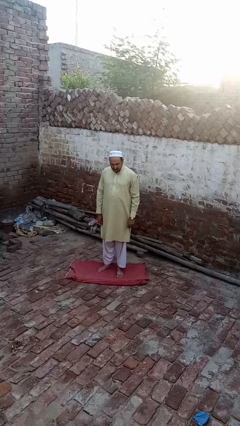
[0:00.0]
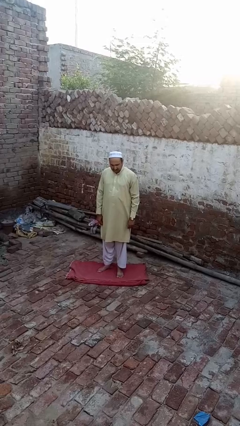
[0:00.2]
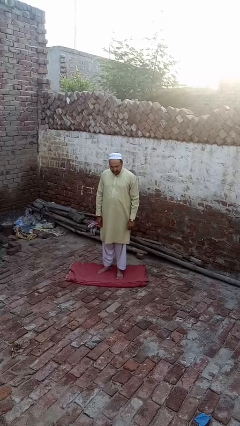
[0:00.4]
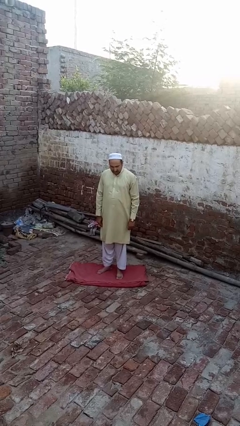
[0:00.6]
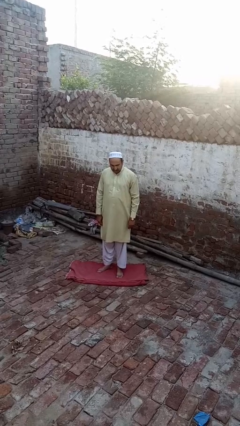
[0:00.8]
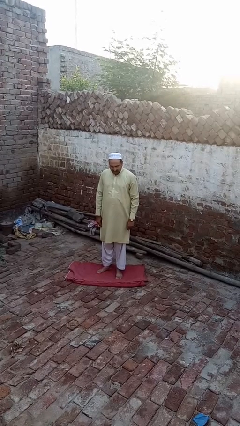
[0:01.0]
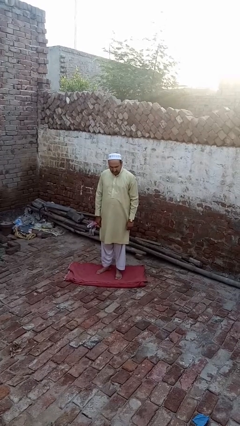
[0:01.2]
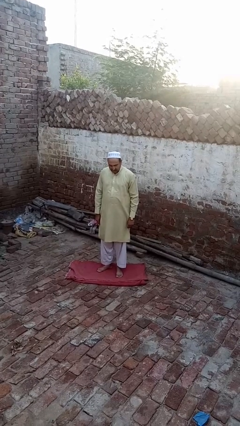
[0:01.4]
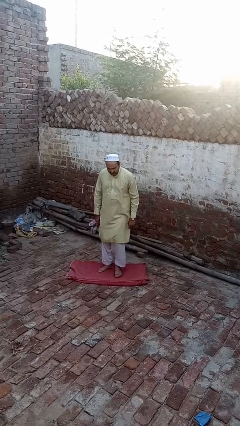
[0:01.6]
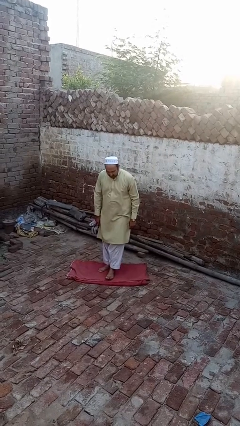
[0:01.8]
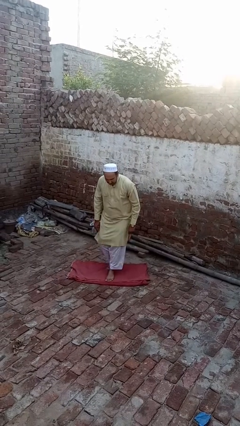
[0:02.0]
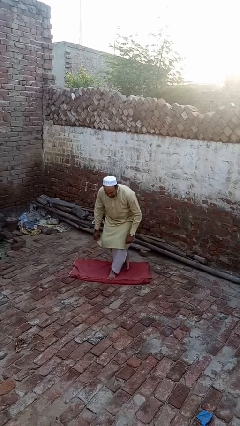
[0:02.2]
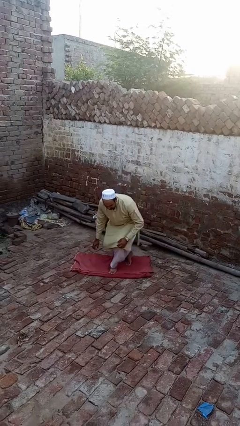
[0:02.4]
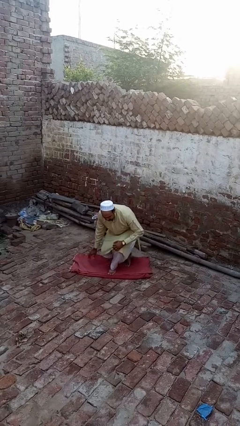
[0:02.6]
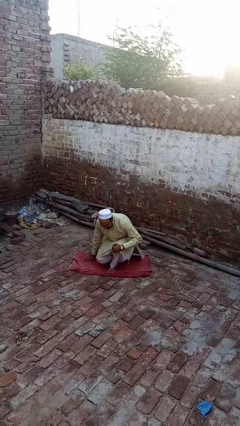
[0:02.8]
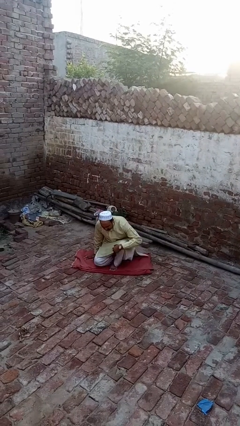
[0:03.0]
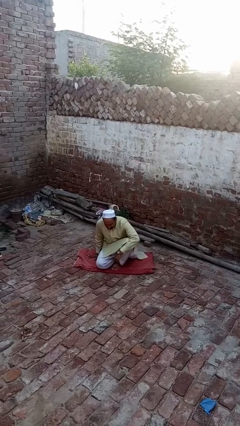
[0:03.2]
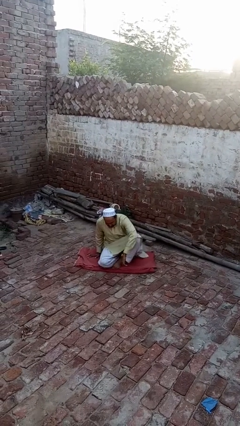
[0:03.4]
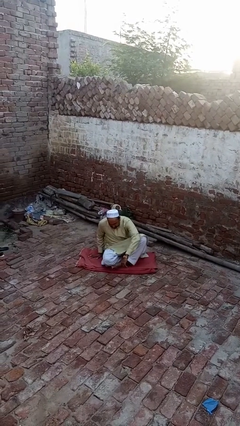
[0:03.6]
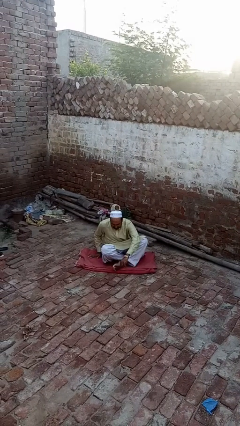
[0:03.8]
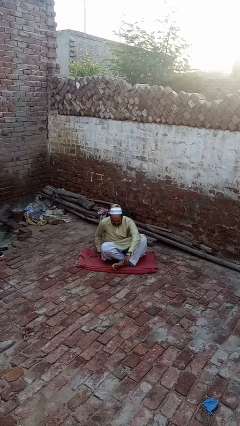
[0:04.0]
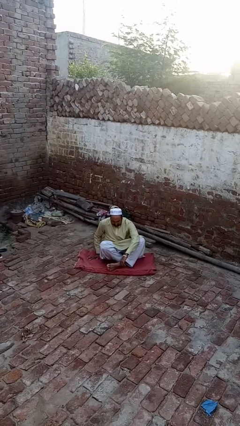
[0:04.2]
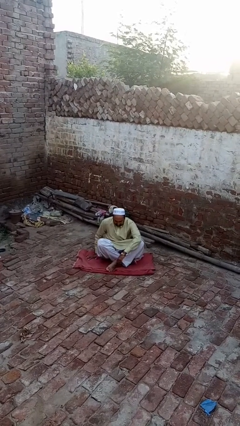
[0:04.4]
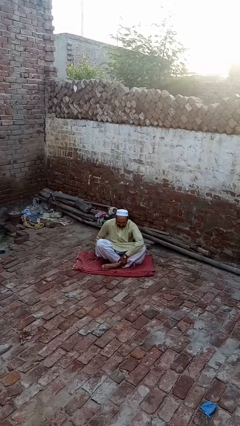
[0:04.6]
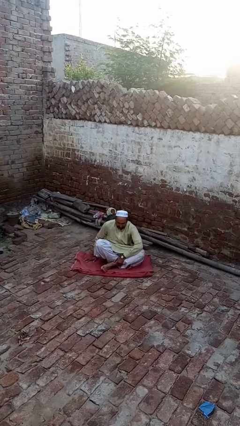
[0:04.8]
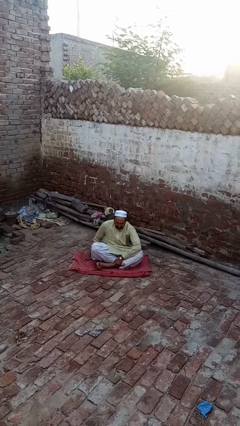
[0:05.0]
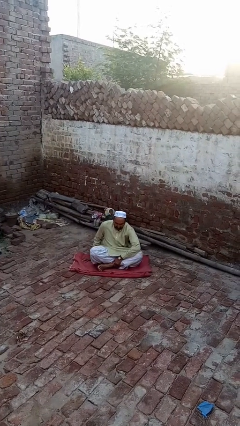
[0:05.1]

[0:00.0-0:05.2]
person sits crisscross

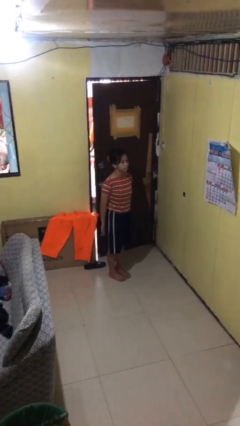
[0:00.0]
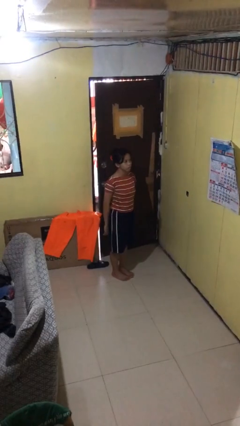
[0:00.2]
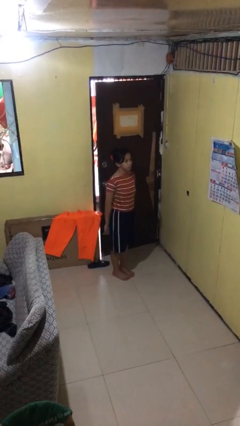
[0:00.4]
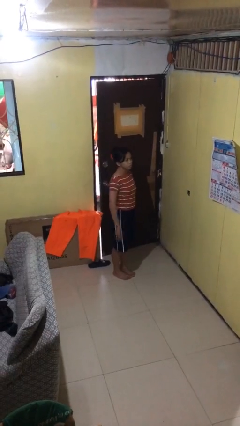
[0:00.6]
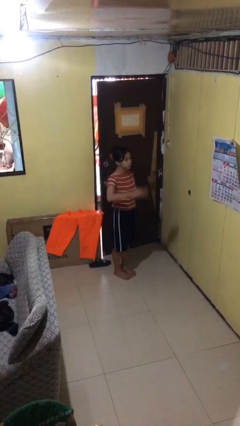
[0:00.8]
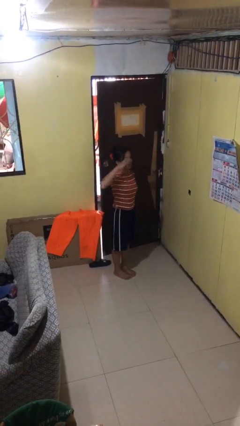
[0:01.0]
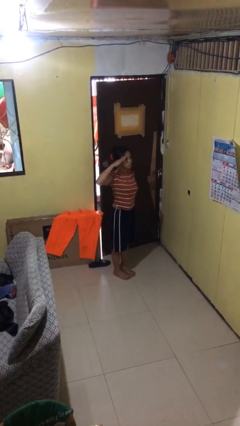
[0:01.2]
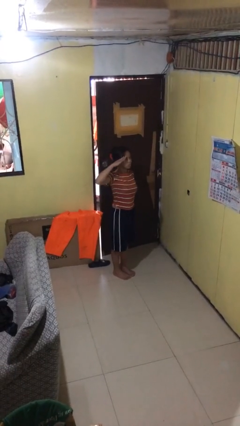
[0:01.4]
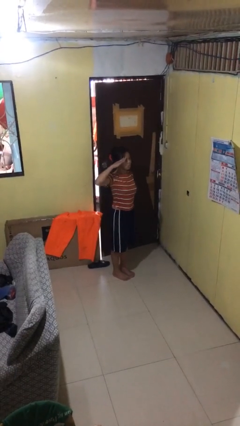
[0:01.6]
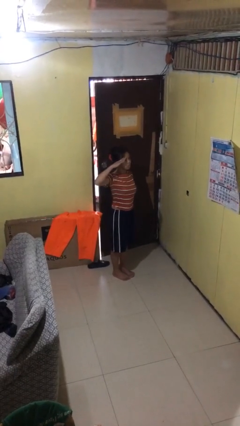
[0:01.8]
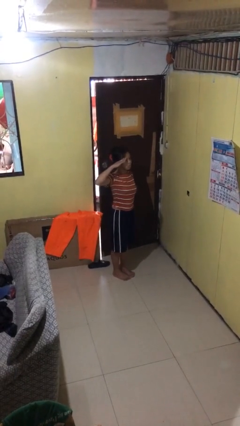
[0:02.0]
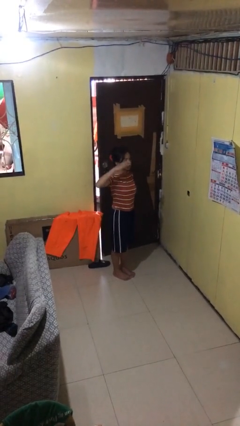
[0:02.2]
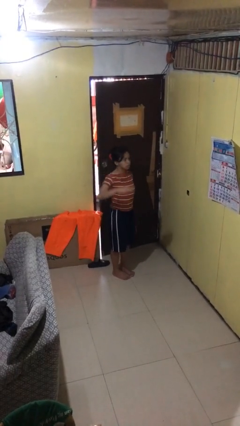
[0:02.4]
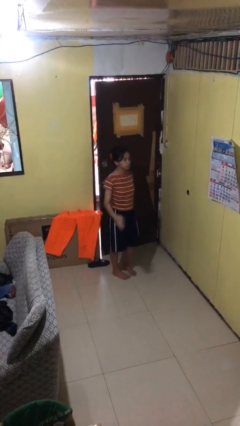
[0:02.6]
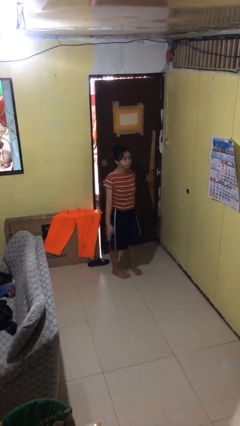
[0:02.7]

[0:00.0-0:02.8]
person salutes

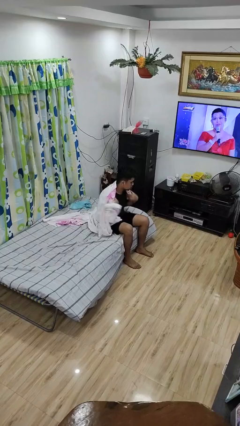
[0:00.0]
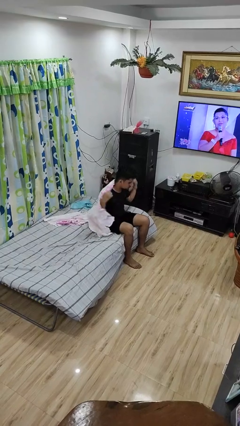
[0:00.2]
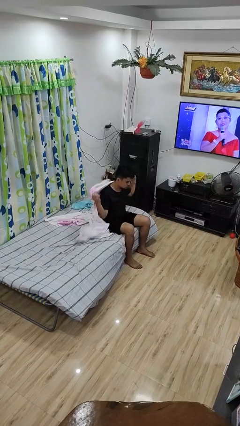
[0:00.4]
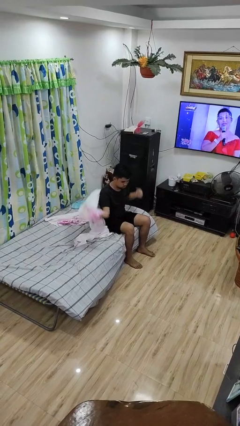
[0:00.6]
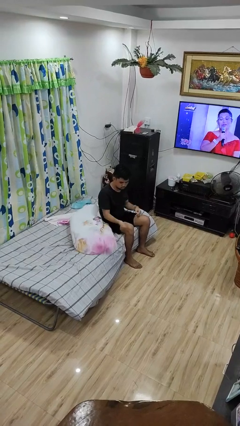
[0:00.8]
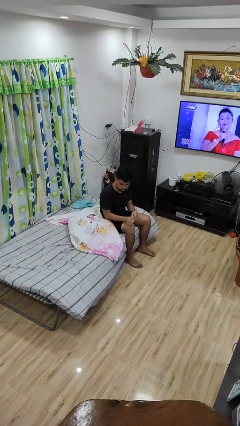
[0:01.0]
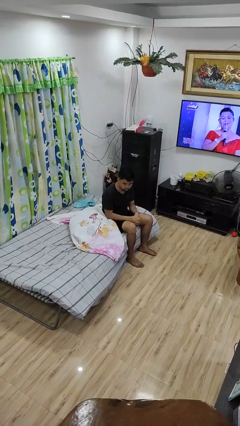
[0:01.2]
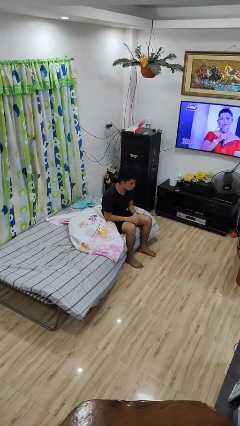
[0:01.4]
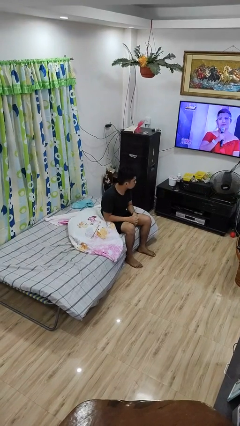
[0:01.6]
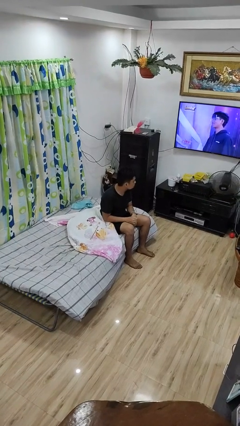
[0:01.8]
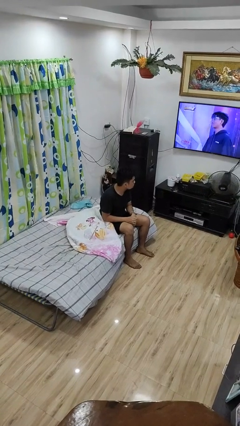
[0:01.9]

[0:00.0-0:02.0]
person uncovers with blanket

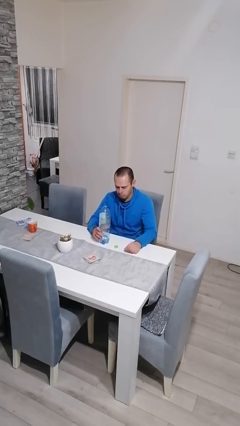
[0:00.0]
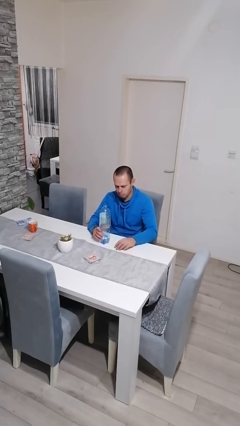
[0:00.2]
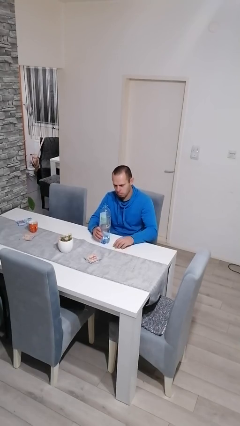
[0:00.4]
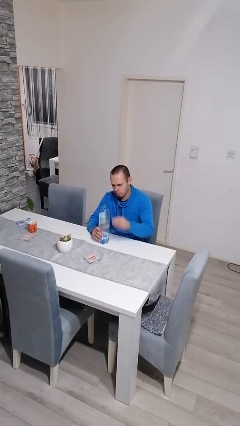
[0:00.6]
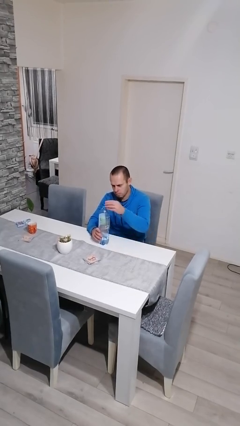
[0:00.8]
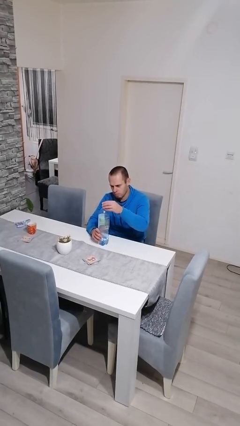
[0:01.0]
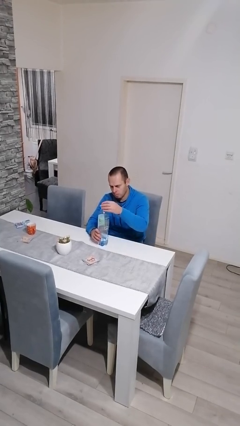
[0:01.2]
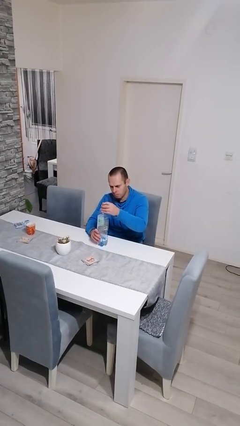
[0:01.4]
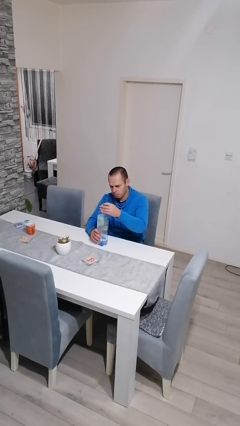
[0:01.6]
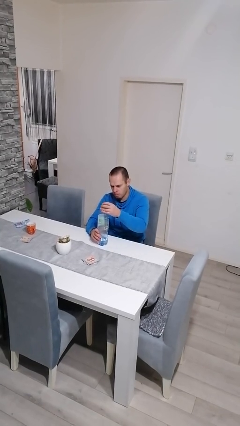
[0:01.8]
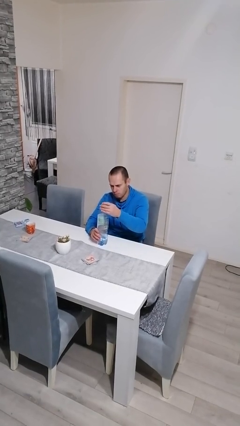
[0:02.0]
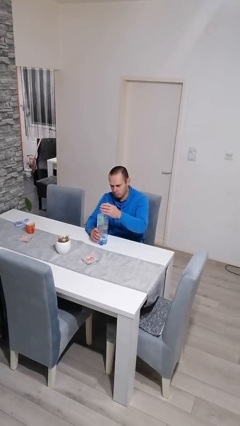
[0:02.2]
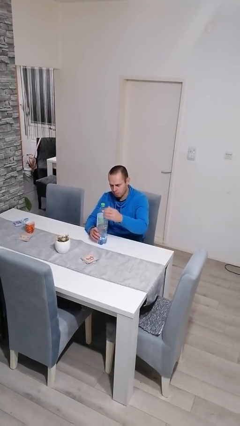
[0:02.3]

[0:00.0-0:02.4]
person screws lid to bottle

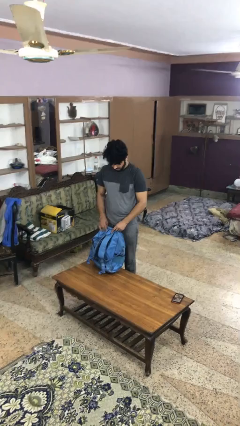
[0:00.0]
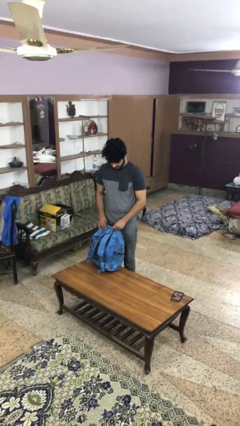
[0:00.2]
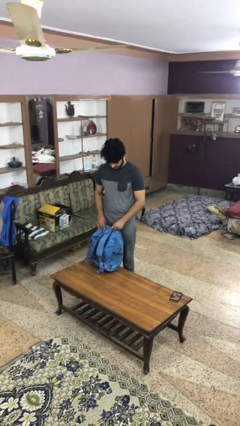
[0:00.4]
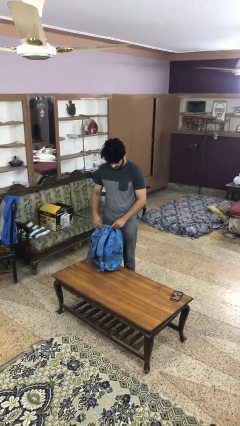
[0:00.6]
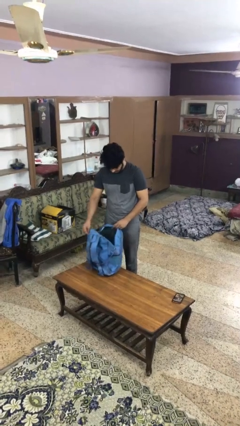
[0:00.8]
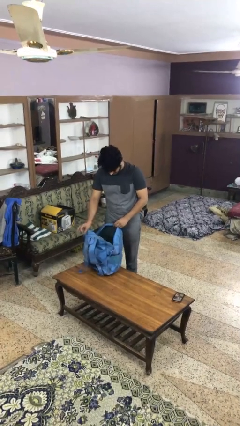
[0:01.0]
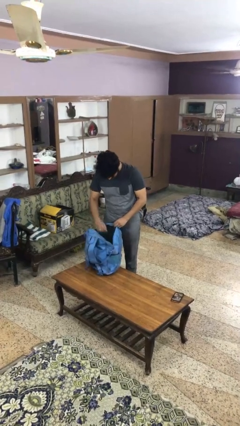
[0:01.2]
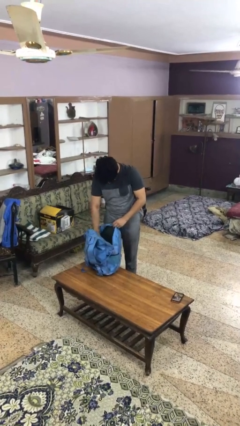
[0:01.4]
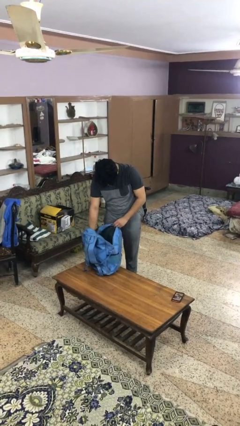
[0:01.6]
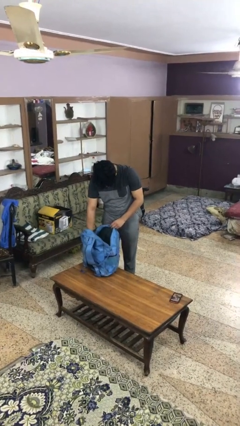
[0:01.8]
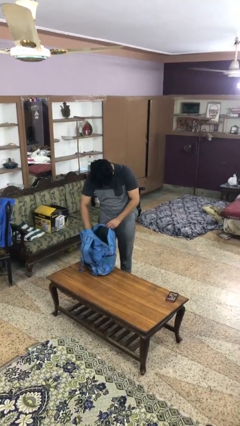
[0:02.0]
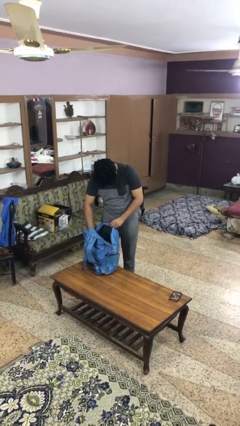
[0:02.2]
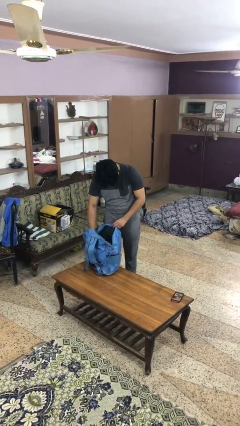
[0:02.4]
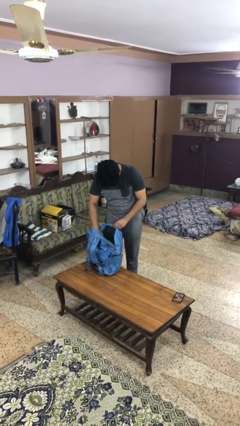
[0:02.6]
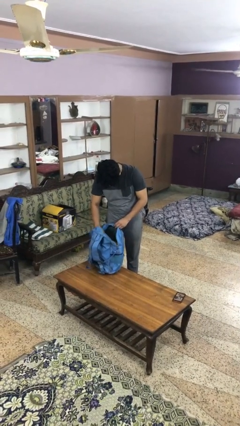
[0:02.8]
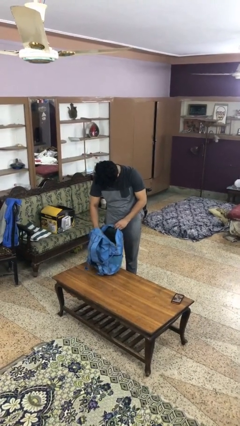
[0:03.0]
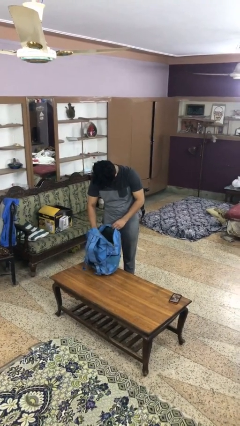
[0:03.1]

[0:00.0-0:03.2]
person searches in bag

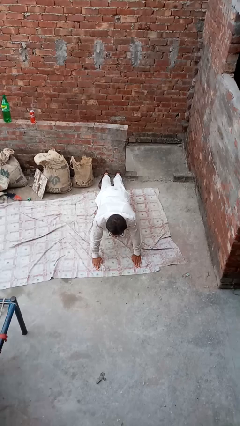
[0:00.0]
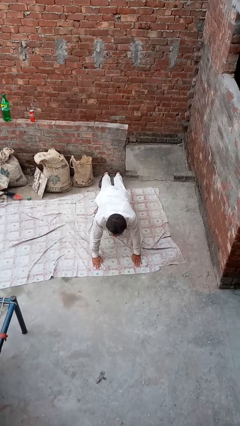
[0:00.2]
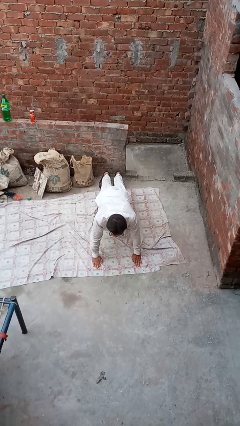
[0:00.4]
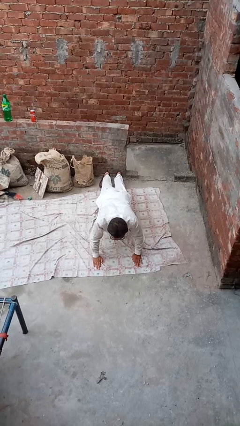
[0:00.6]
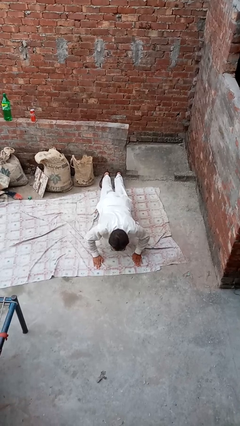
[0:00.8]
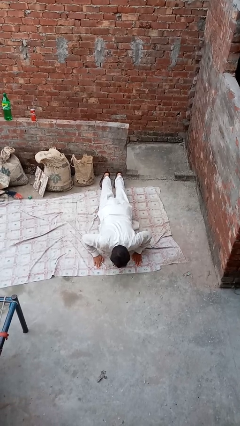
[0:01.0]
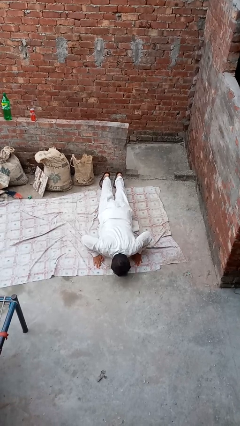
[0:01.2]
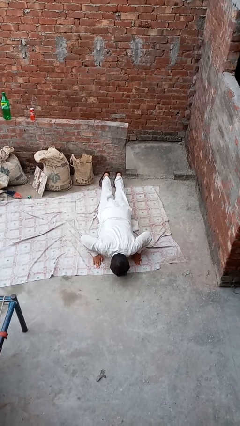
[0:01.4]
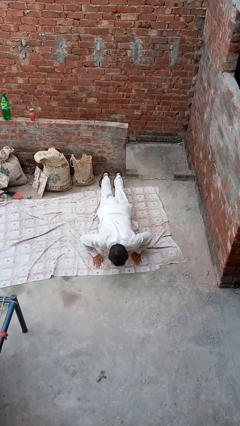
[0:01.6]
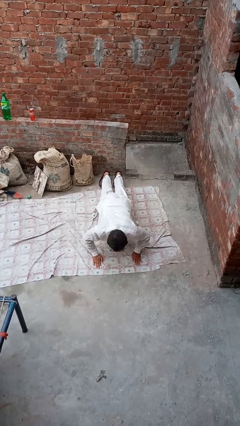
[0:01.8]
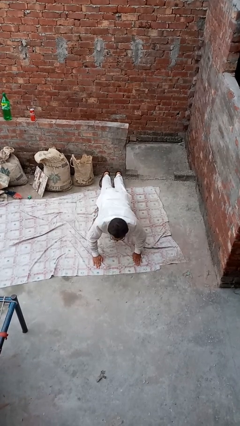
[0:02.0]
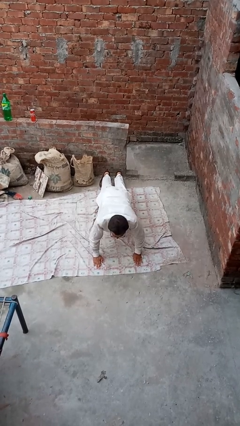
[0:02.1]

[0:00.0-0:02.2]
person exercises with situp
